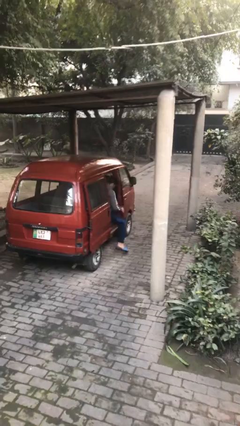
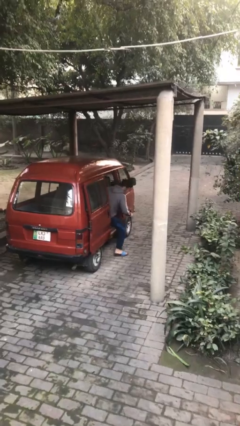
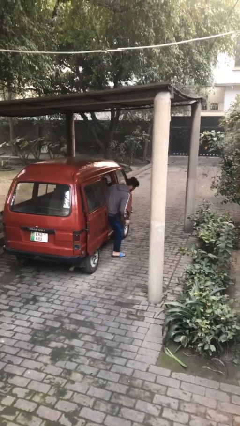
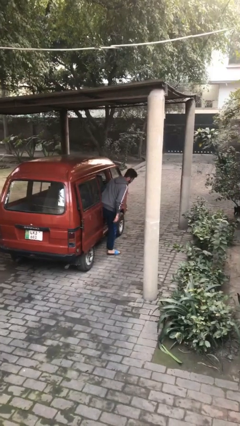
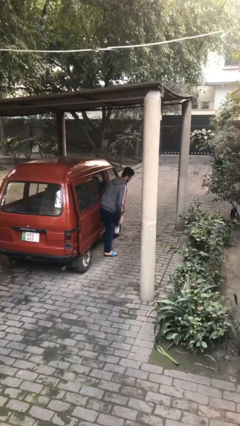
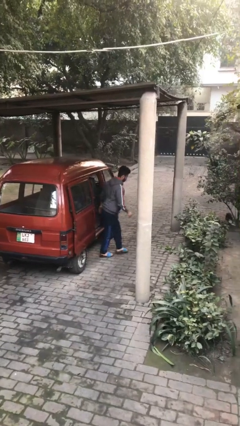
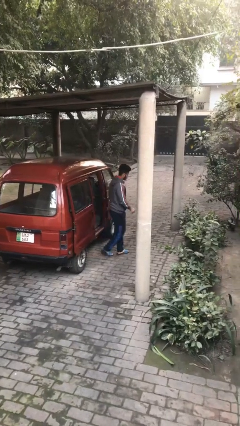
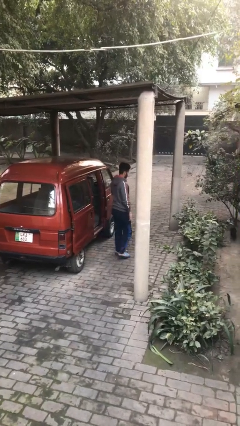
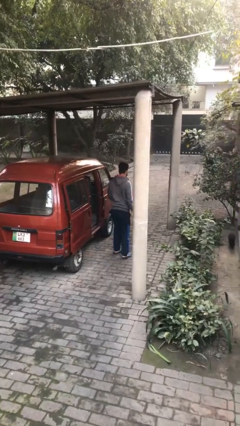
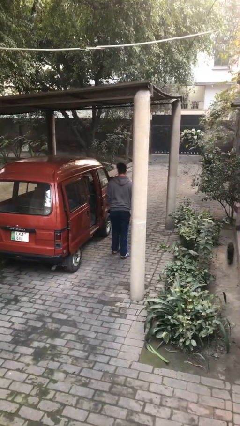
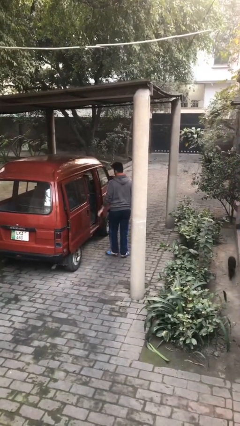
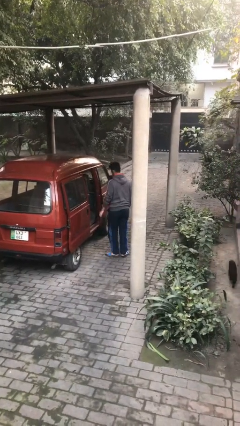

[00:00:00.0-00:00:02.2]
person exits car

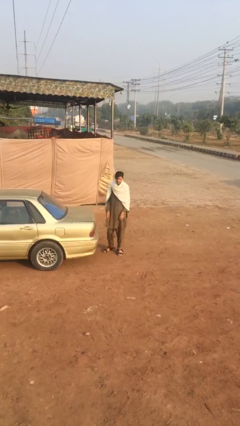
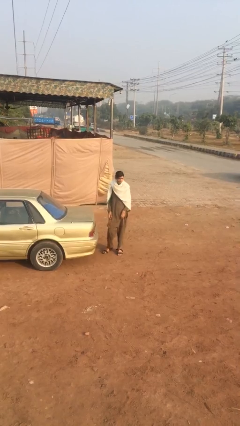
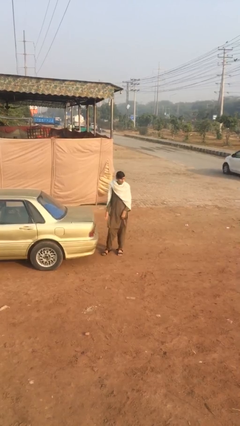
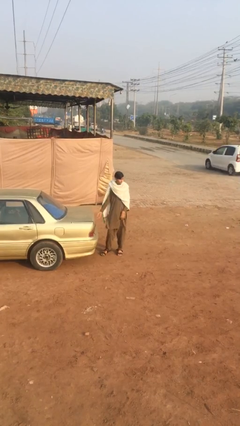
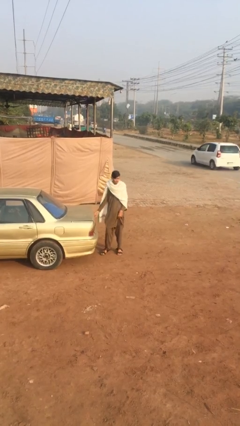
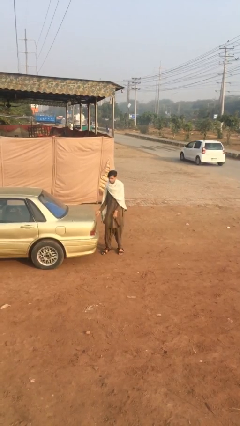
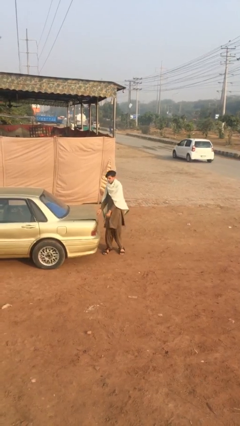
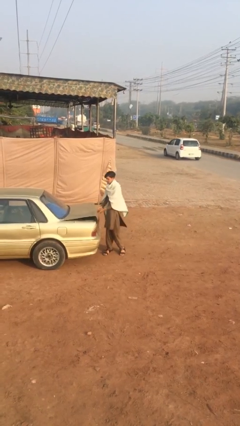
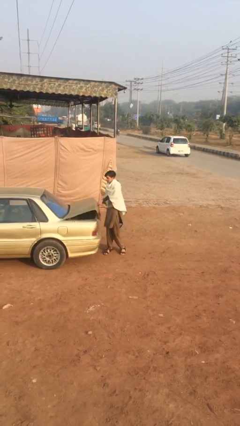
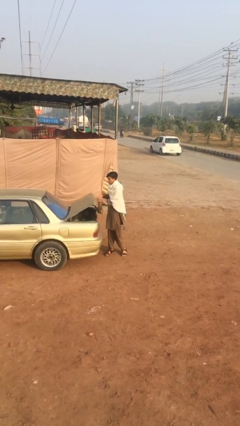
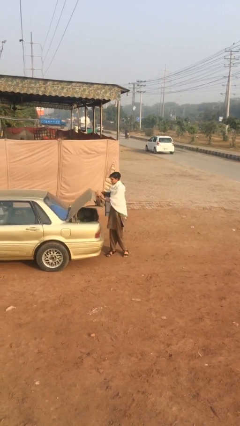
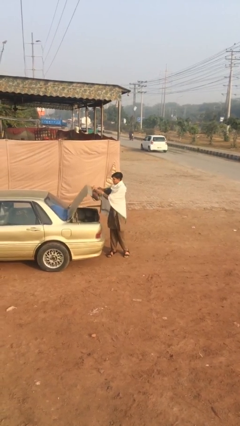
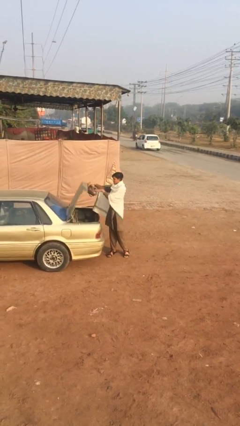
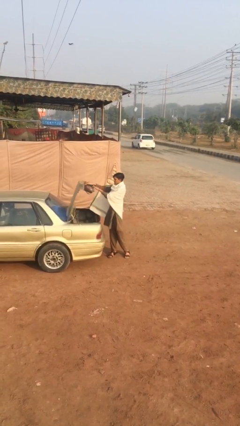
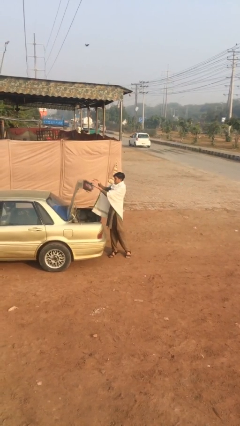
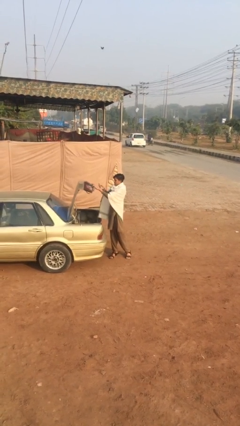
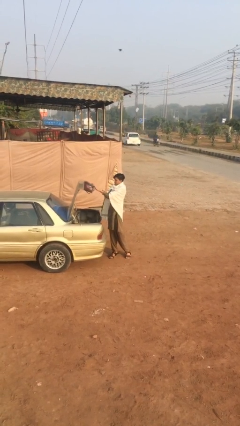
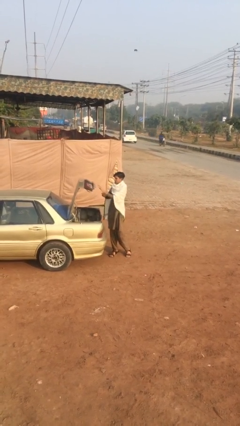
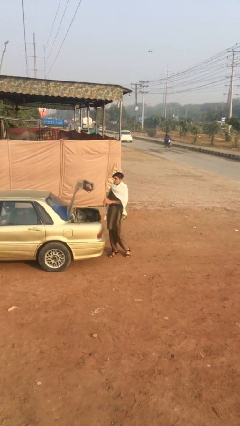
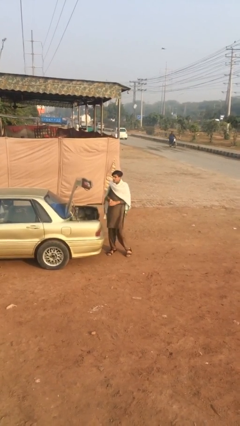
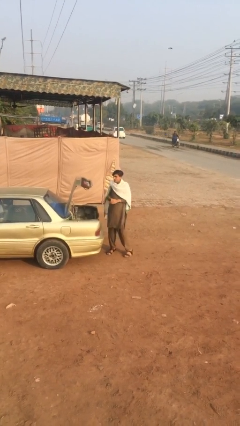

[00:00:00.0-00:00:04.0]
person opens car trunk

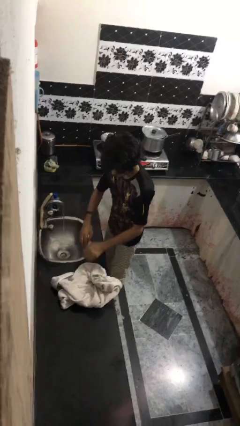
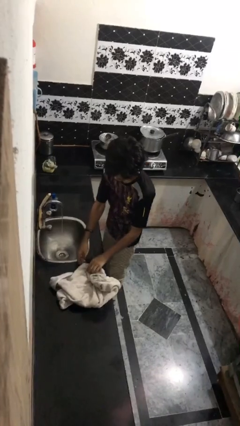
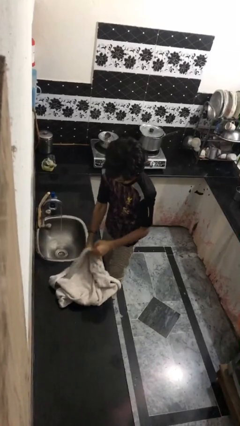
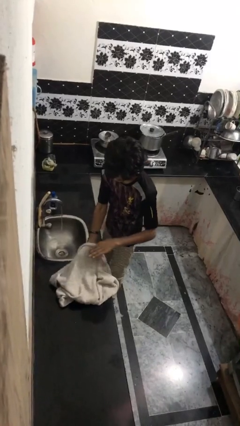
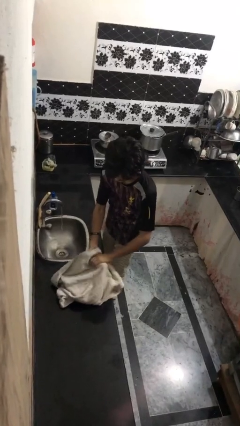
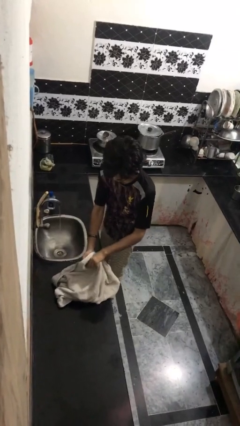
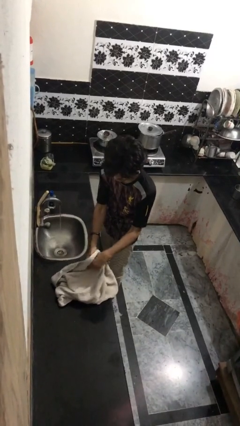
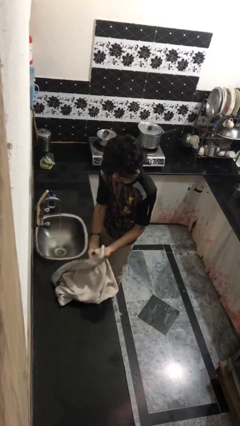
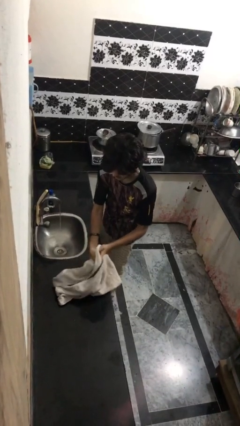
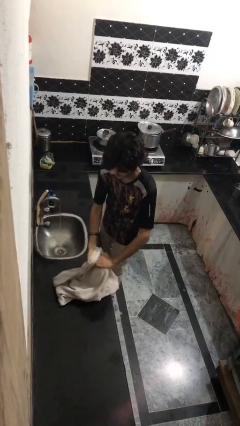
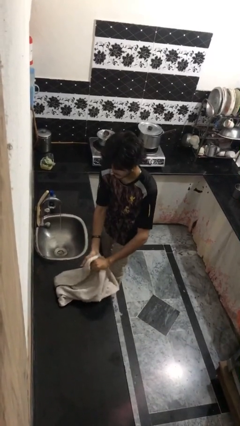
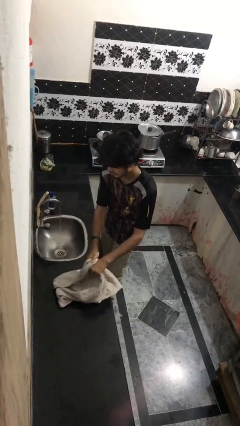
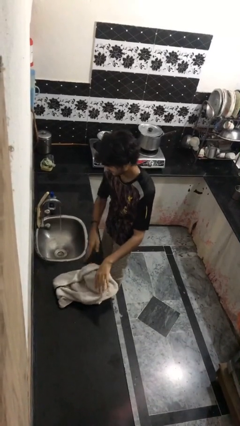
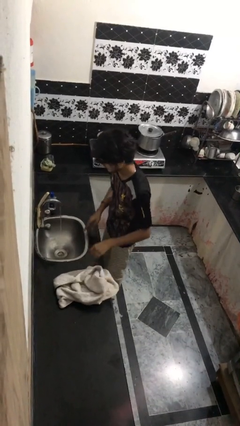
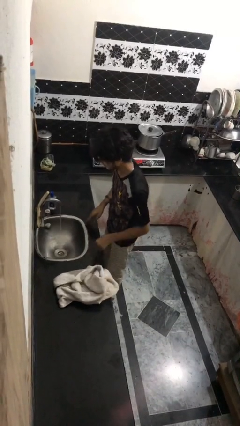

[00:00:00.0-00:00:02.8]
person dries hands with towel

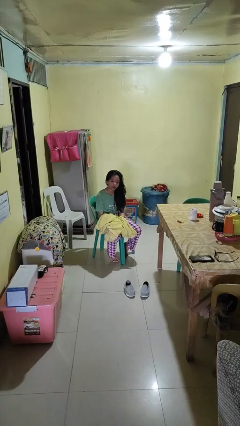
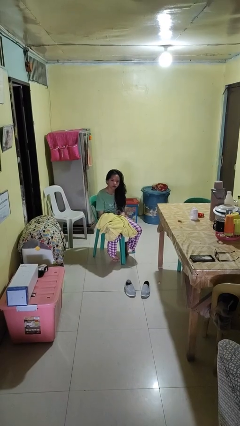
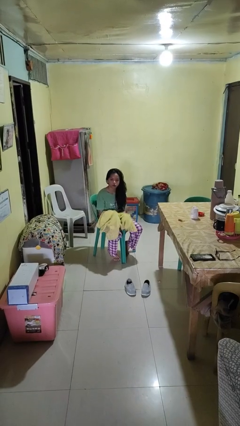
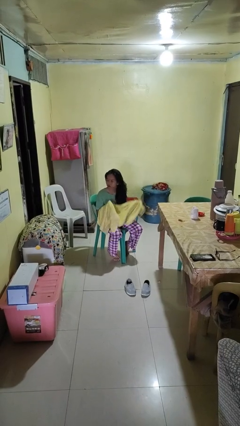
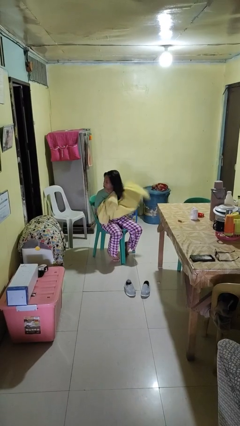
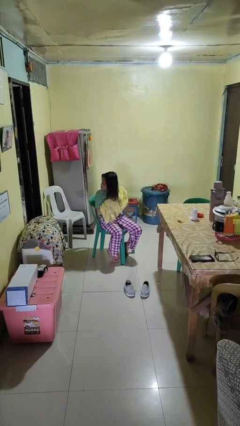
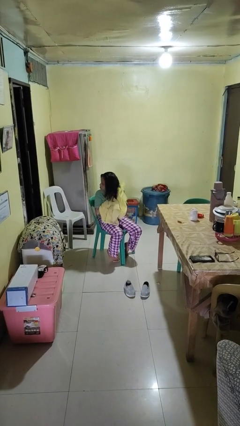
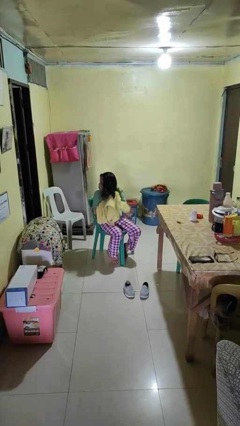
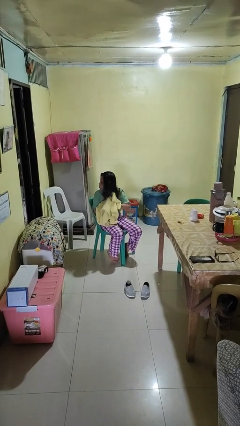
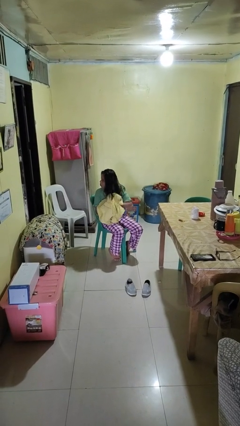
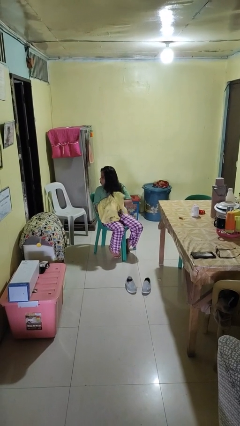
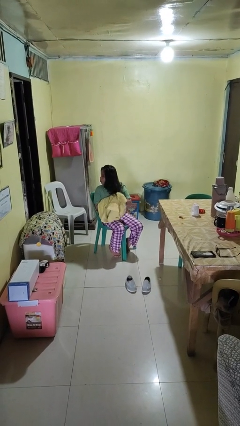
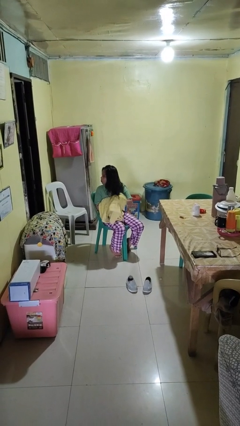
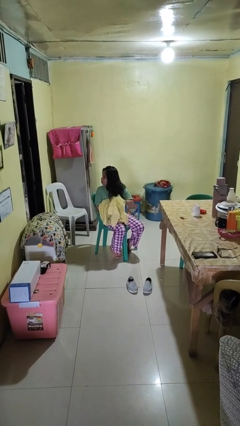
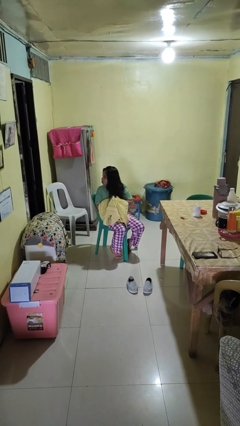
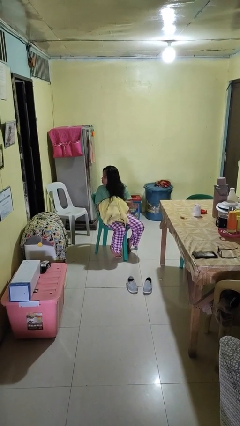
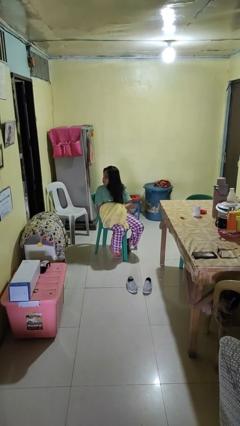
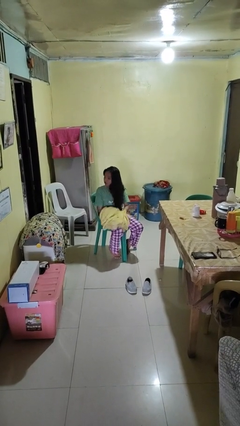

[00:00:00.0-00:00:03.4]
person dries hair with towel

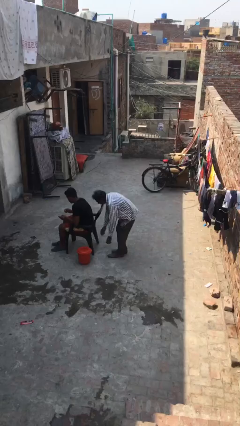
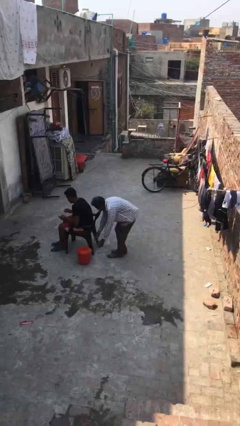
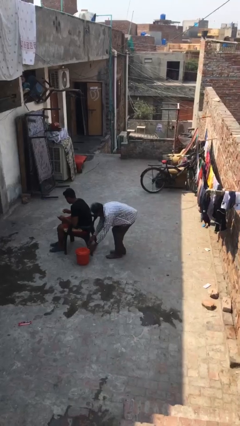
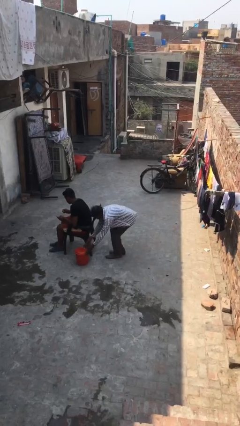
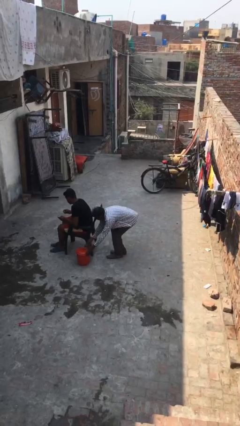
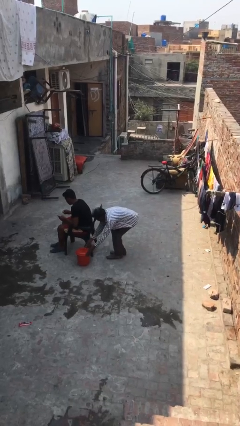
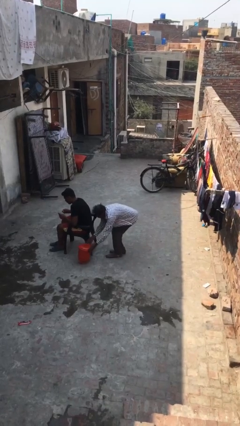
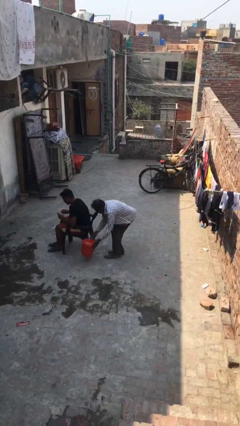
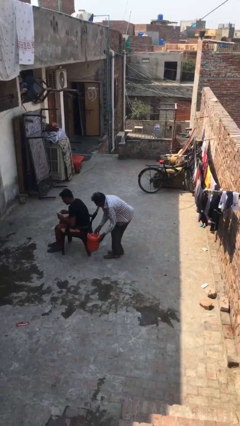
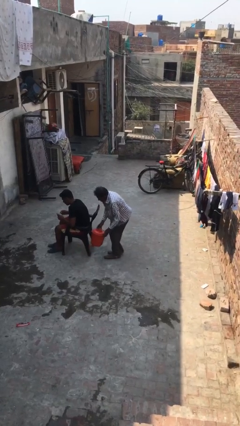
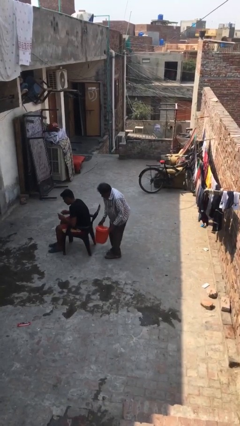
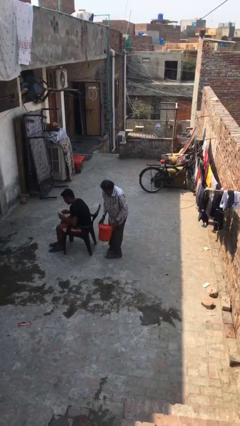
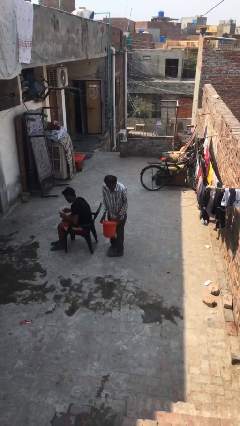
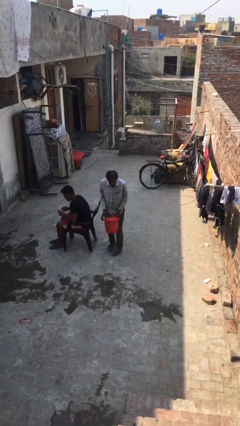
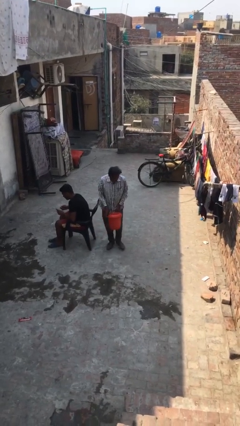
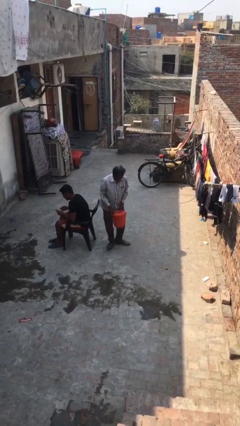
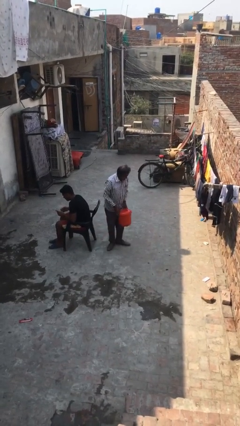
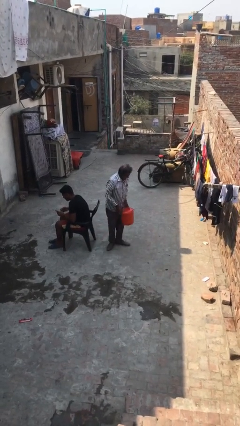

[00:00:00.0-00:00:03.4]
person steals object from person

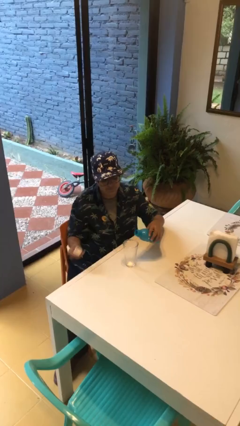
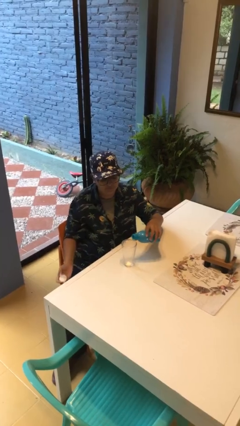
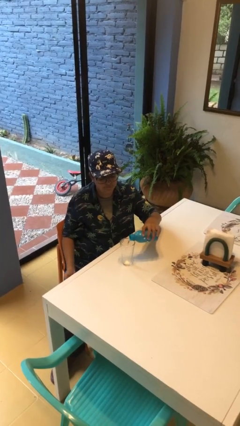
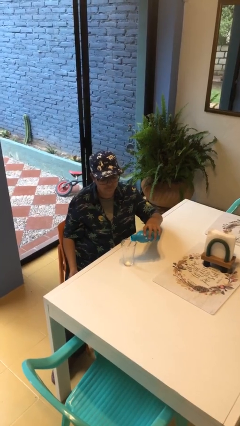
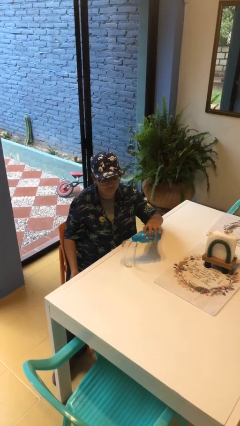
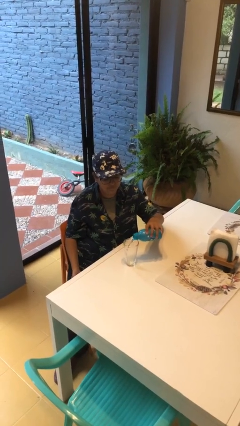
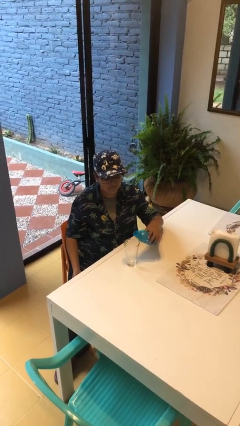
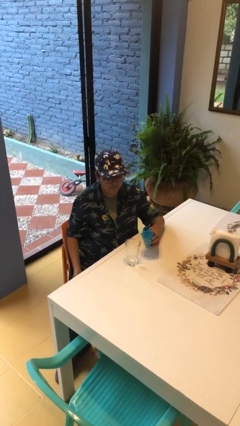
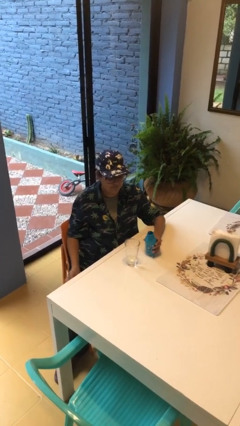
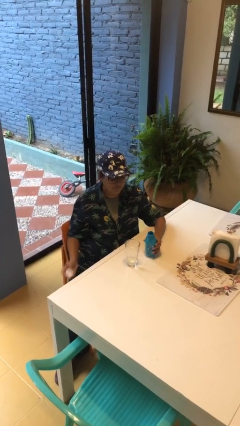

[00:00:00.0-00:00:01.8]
person pours liquid into cup

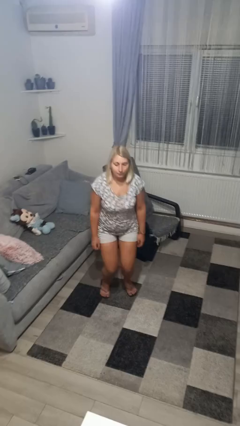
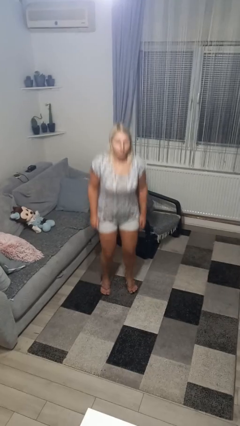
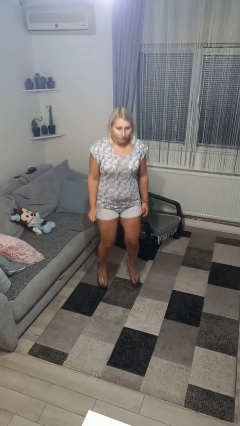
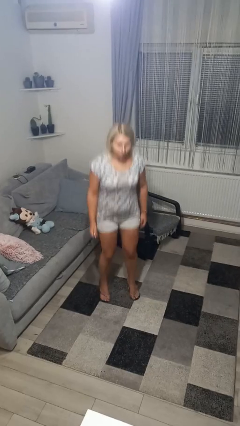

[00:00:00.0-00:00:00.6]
person jumps
